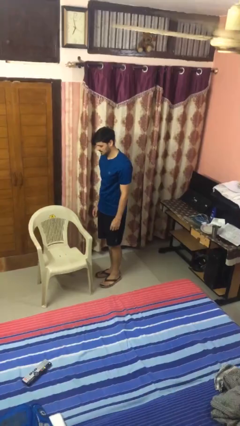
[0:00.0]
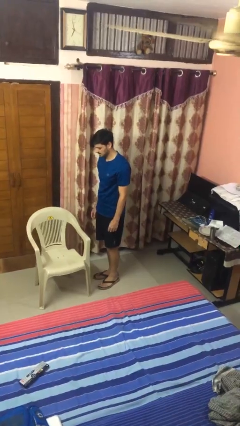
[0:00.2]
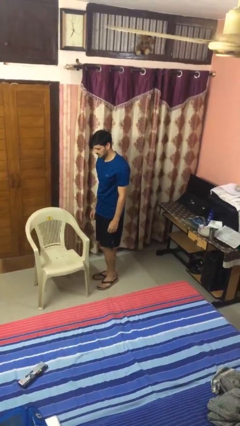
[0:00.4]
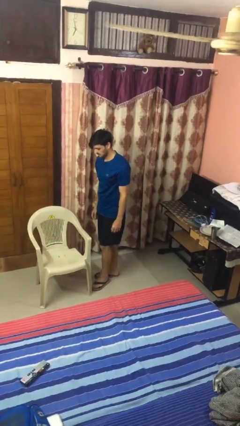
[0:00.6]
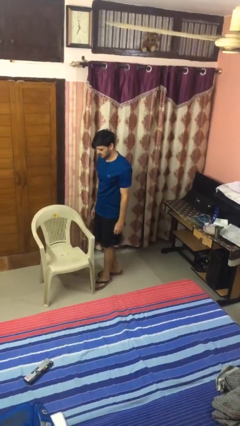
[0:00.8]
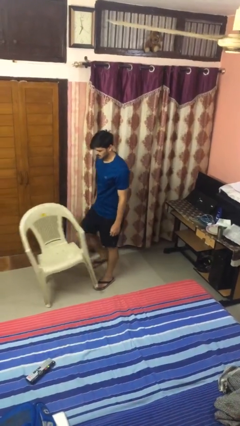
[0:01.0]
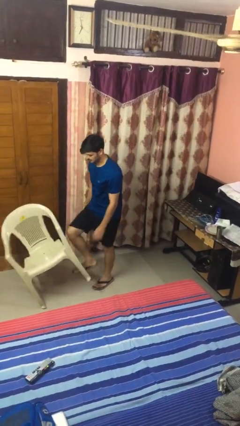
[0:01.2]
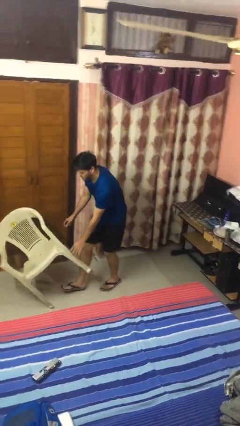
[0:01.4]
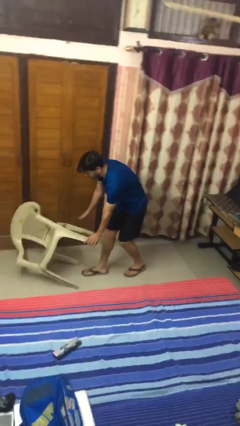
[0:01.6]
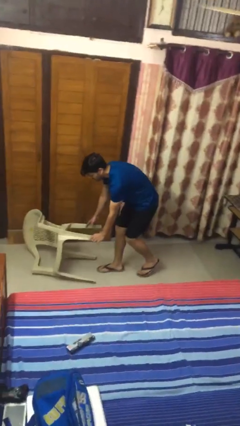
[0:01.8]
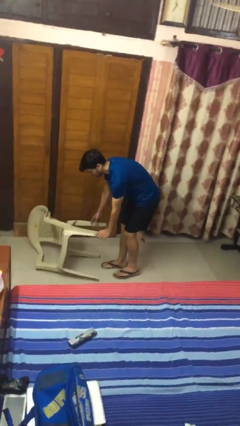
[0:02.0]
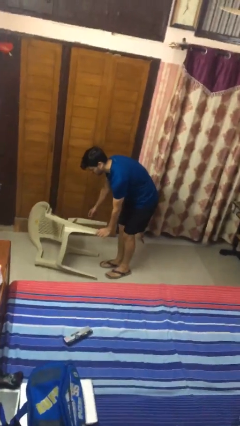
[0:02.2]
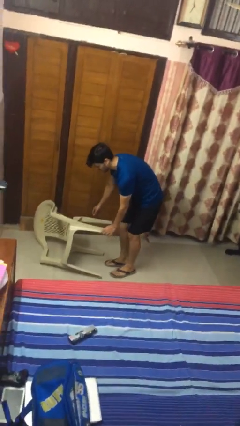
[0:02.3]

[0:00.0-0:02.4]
person knocks over furniture

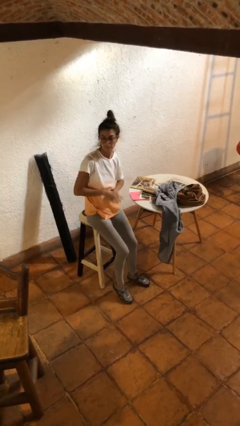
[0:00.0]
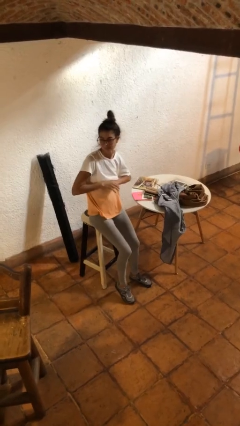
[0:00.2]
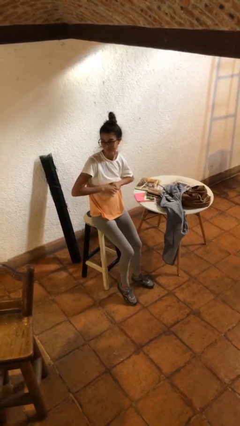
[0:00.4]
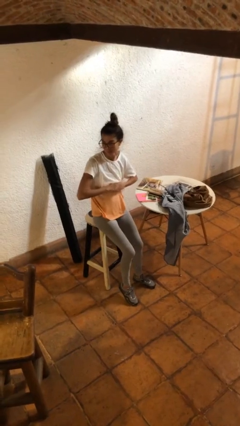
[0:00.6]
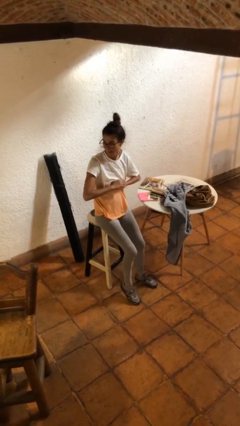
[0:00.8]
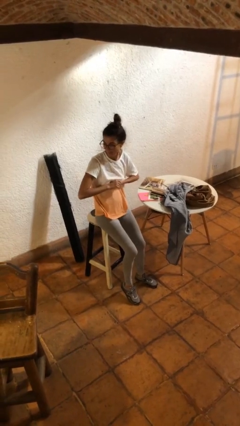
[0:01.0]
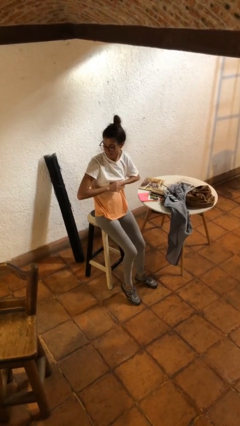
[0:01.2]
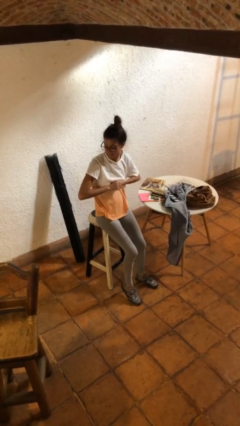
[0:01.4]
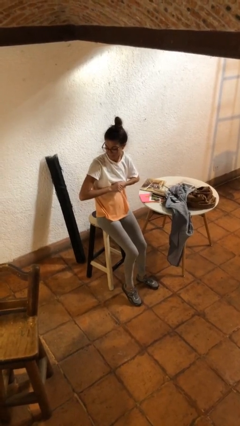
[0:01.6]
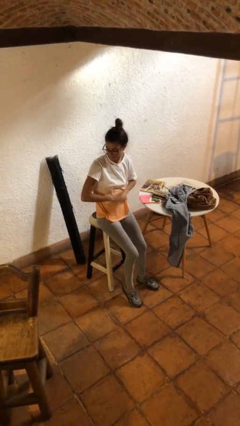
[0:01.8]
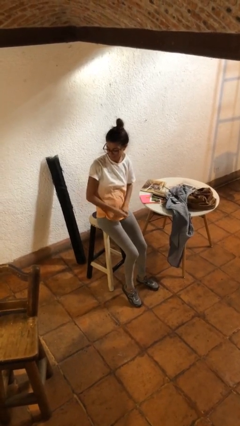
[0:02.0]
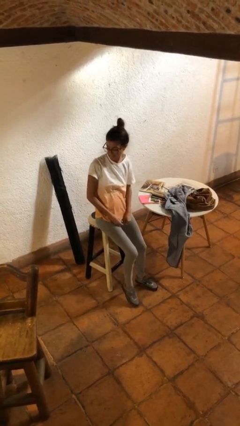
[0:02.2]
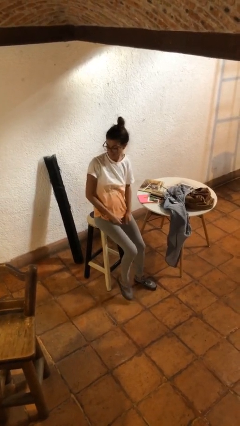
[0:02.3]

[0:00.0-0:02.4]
person cracks knuckles

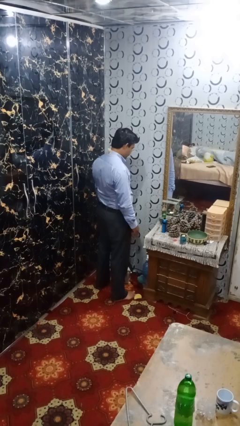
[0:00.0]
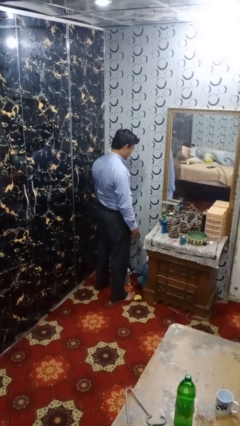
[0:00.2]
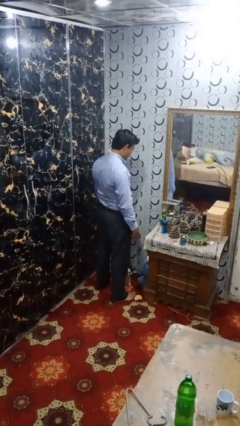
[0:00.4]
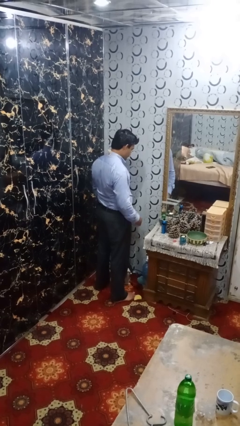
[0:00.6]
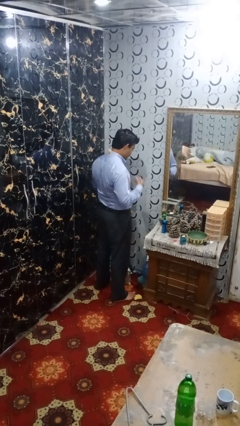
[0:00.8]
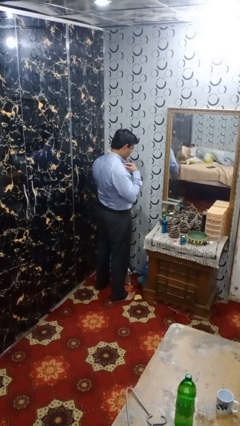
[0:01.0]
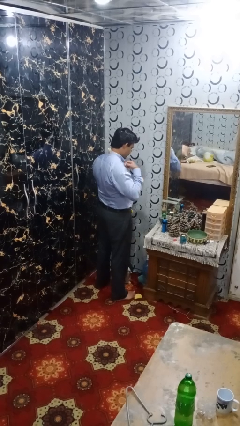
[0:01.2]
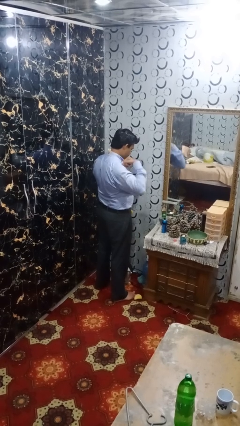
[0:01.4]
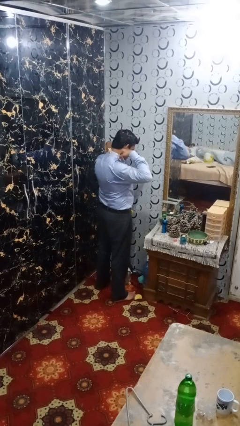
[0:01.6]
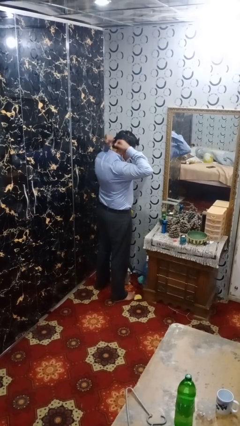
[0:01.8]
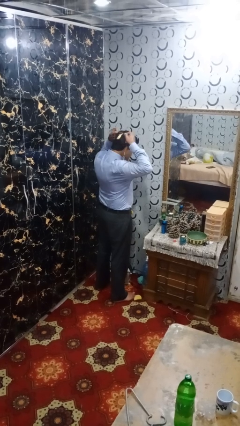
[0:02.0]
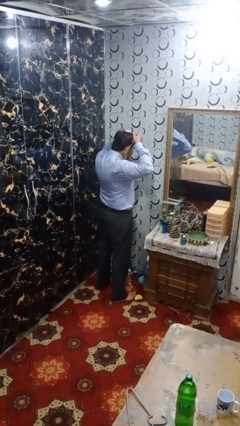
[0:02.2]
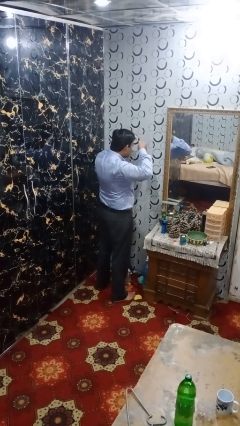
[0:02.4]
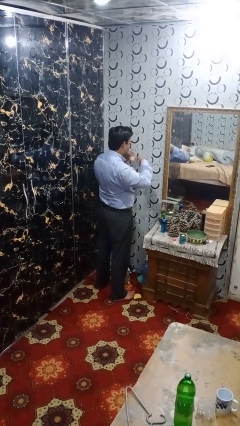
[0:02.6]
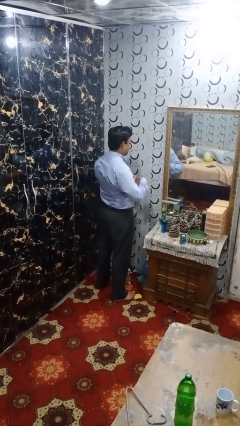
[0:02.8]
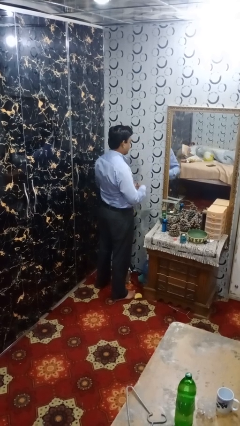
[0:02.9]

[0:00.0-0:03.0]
person takes off necklace

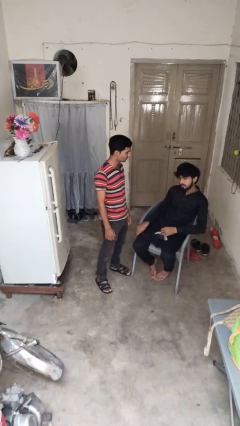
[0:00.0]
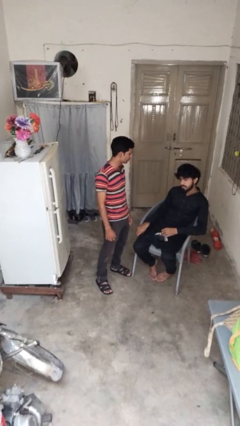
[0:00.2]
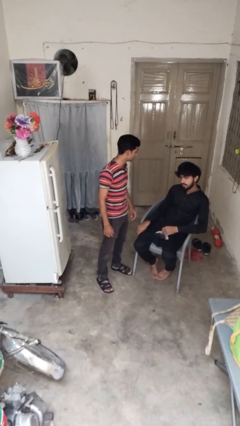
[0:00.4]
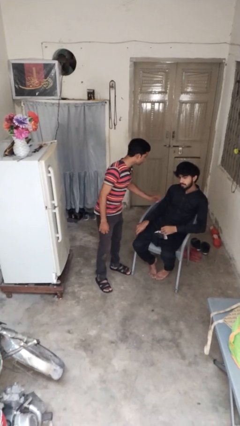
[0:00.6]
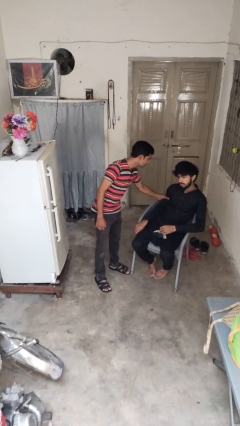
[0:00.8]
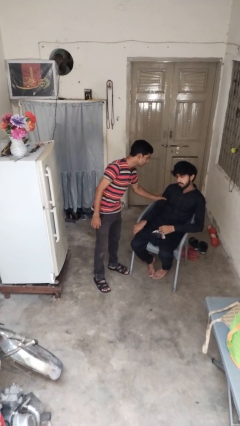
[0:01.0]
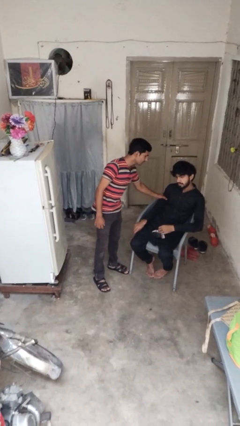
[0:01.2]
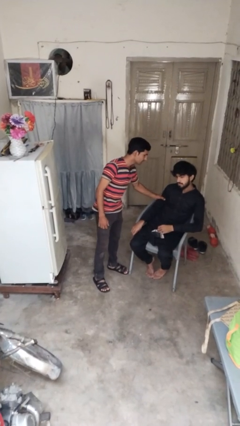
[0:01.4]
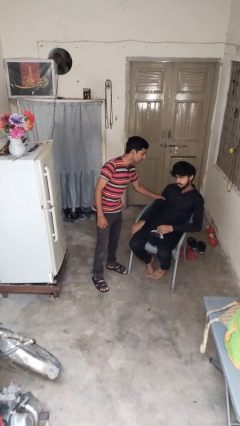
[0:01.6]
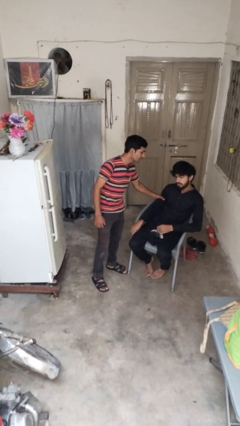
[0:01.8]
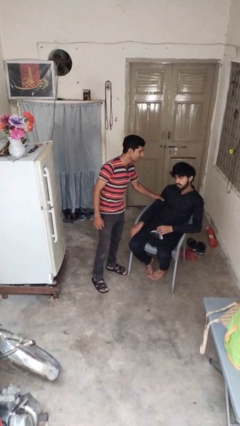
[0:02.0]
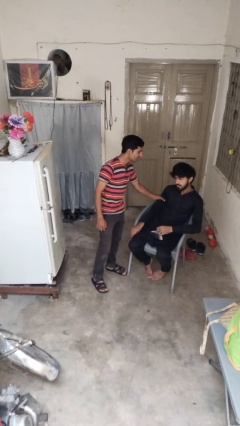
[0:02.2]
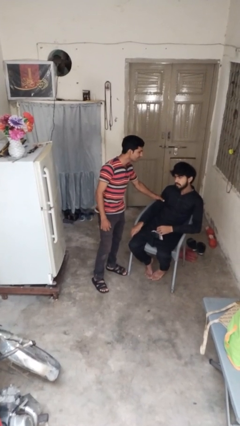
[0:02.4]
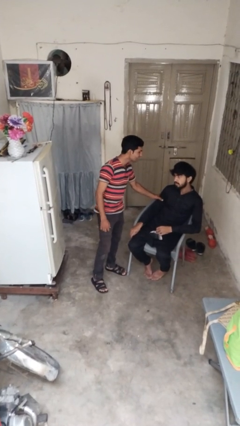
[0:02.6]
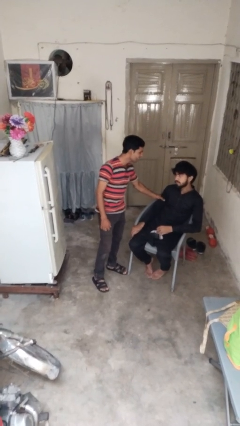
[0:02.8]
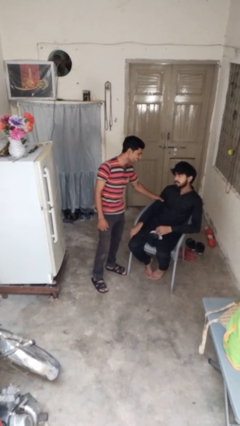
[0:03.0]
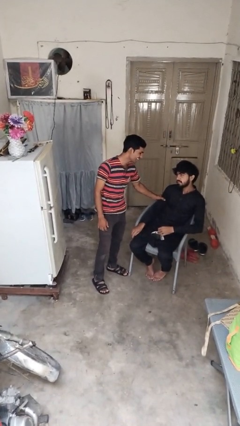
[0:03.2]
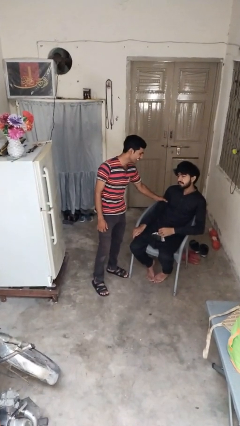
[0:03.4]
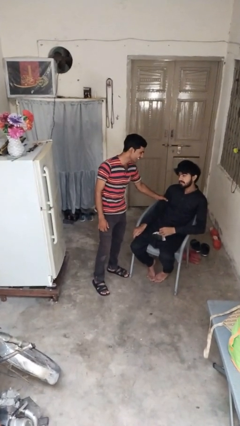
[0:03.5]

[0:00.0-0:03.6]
person grabs person by bicep

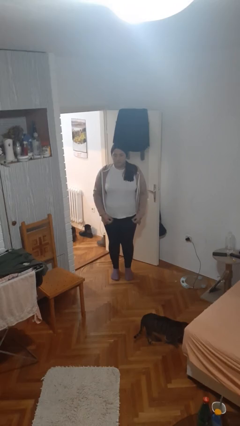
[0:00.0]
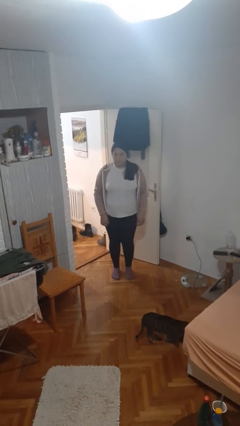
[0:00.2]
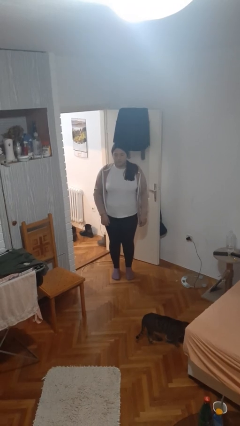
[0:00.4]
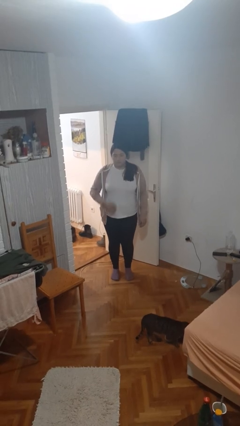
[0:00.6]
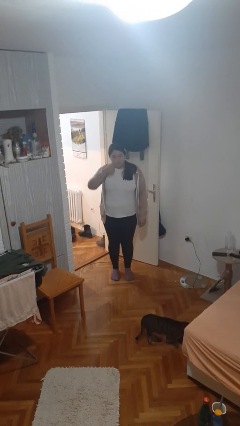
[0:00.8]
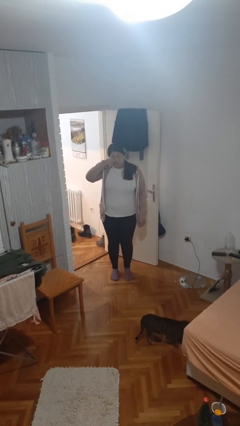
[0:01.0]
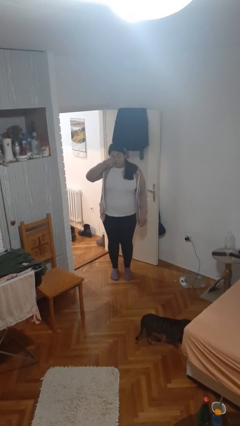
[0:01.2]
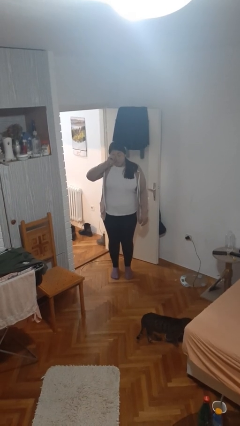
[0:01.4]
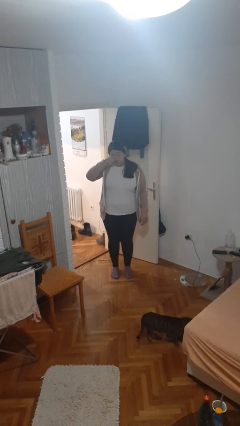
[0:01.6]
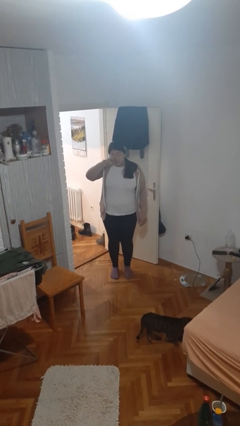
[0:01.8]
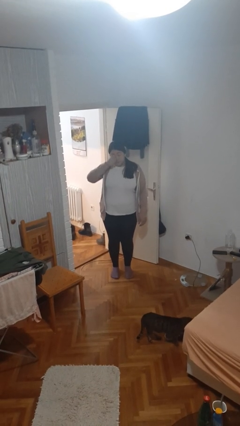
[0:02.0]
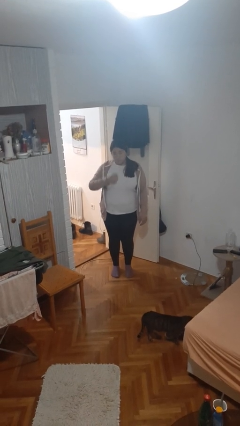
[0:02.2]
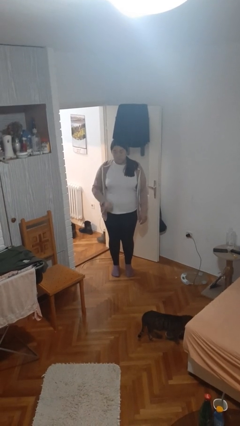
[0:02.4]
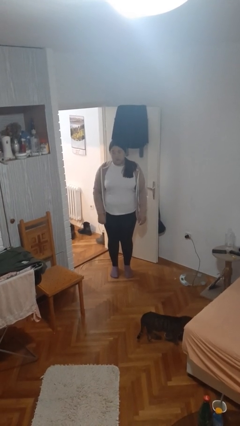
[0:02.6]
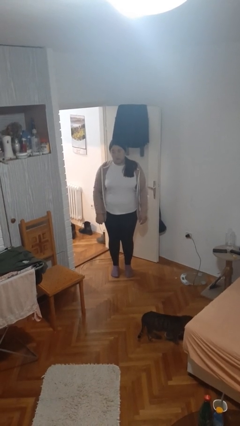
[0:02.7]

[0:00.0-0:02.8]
person rubs eyes

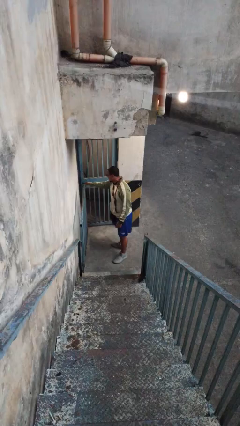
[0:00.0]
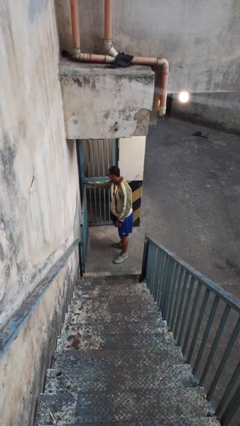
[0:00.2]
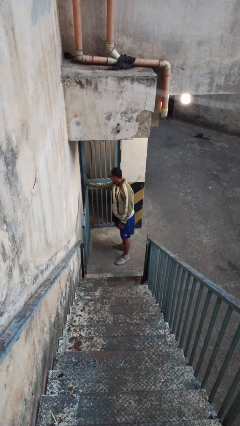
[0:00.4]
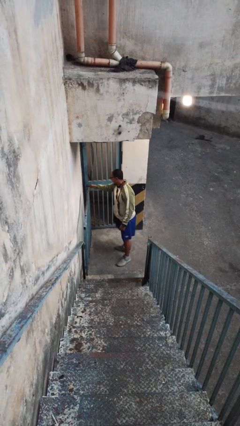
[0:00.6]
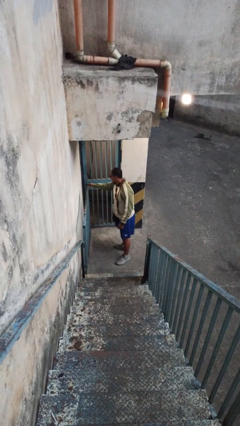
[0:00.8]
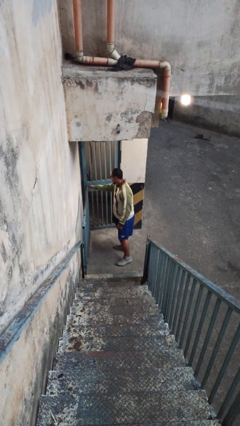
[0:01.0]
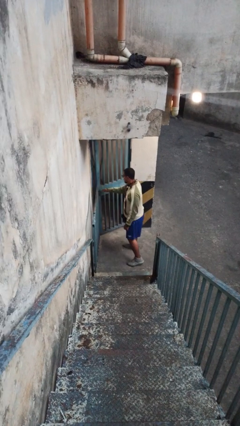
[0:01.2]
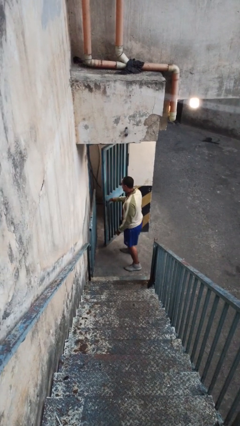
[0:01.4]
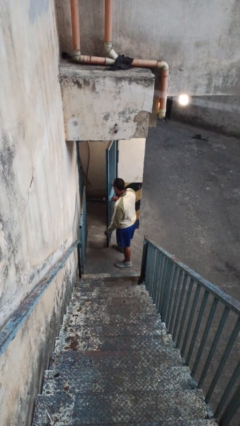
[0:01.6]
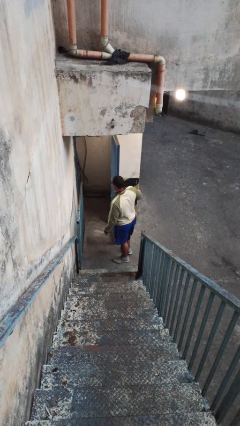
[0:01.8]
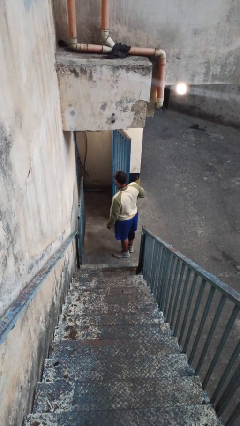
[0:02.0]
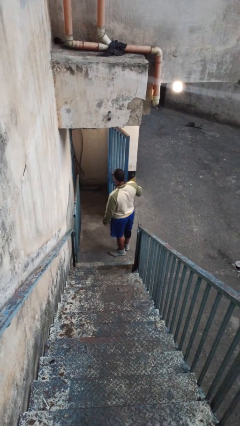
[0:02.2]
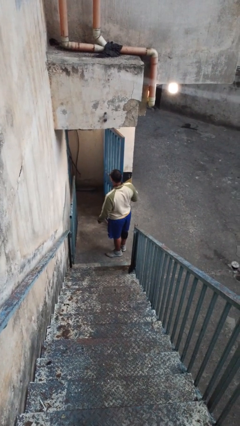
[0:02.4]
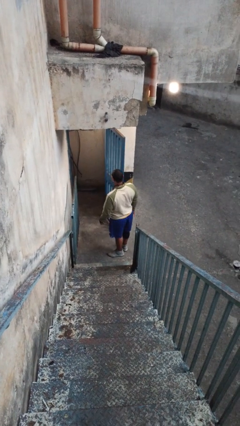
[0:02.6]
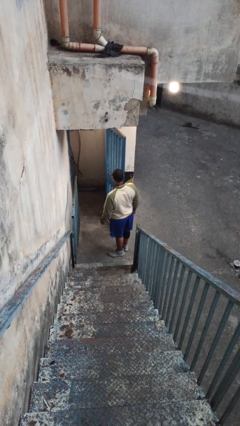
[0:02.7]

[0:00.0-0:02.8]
person opens facility door

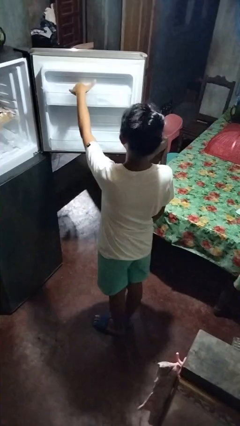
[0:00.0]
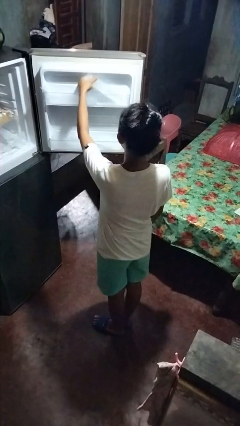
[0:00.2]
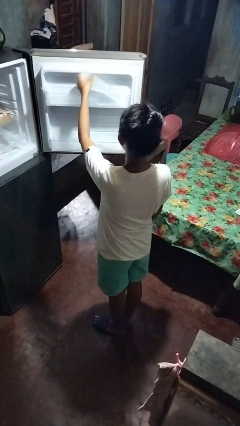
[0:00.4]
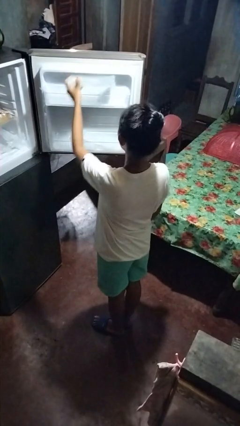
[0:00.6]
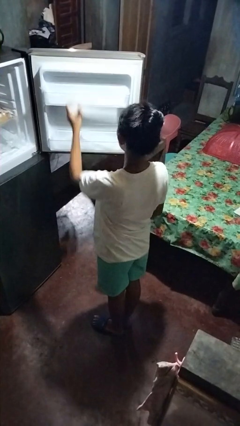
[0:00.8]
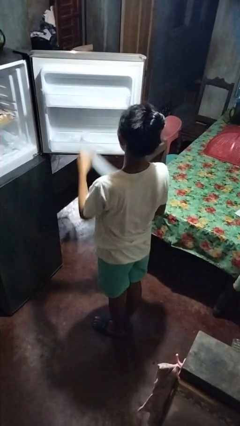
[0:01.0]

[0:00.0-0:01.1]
person takes object from refrigerator
